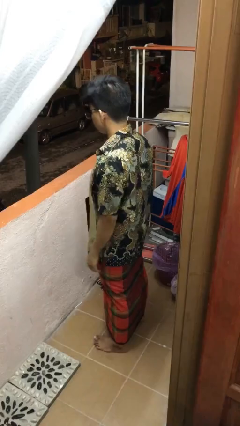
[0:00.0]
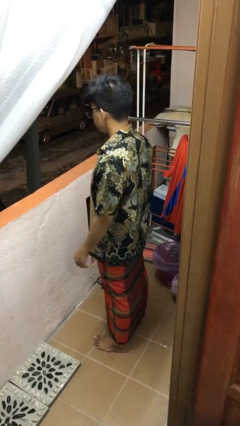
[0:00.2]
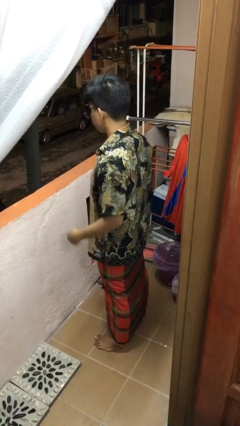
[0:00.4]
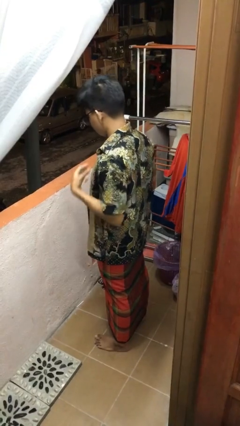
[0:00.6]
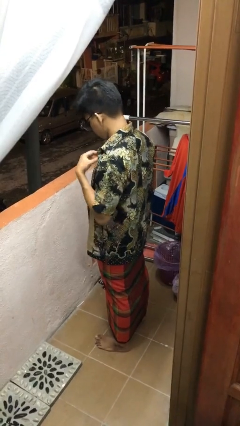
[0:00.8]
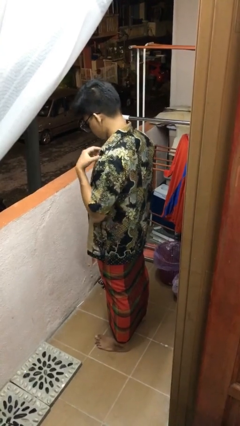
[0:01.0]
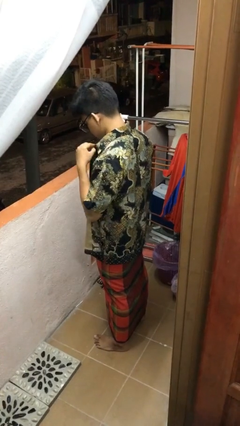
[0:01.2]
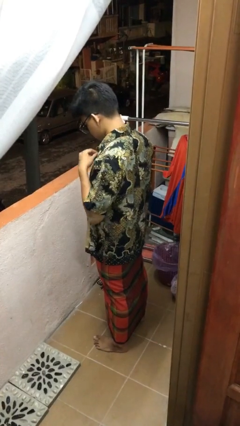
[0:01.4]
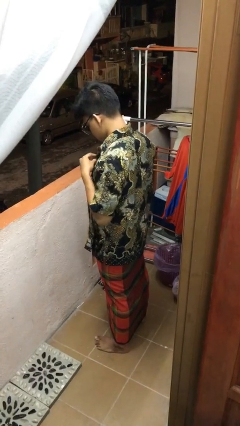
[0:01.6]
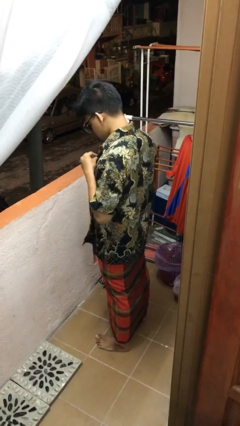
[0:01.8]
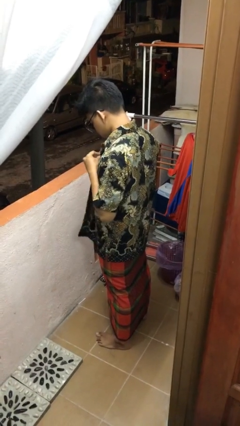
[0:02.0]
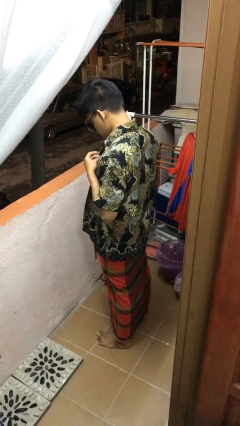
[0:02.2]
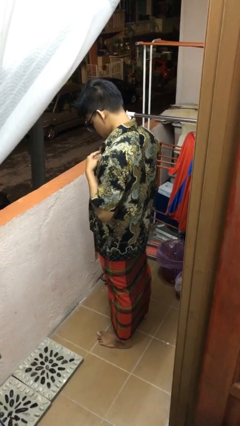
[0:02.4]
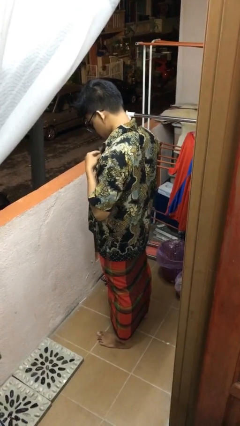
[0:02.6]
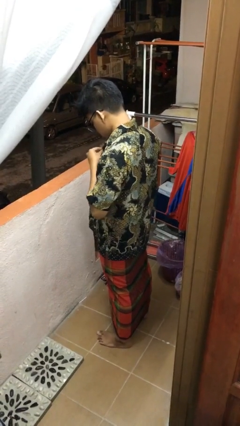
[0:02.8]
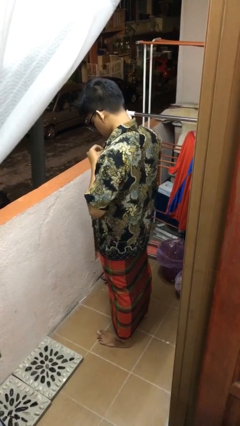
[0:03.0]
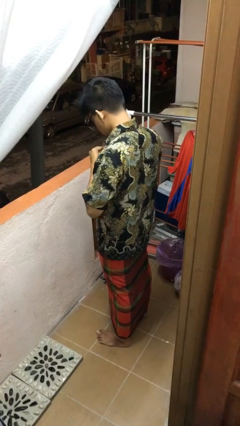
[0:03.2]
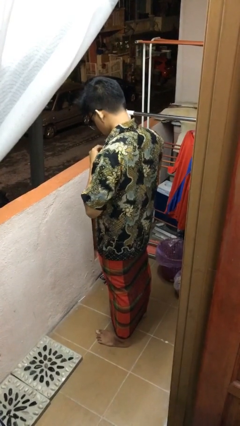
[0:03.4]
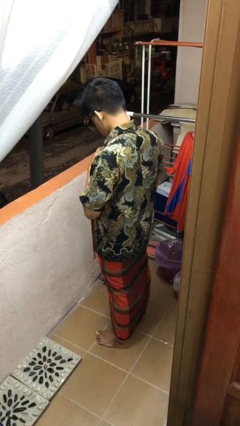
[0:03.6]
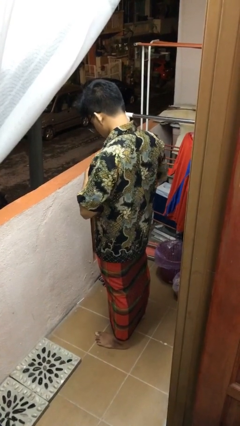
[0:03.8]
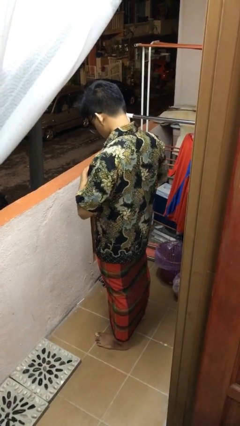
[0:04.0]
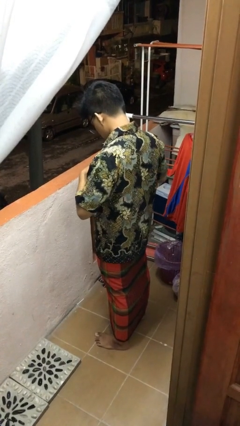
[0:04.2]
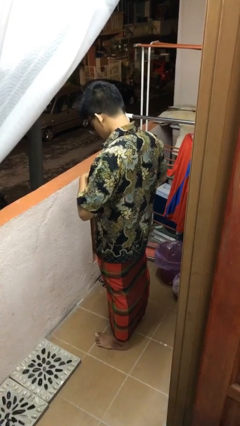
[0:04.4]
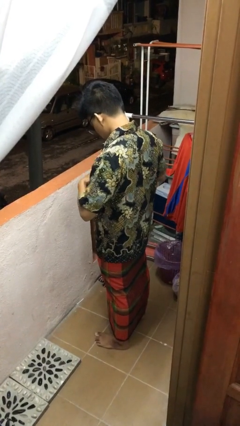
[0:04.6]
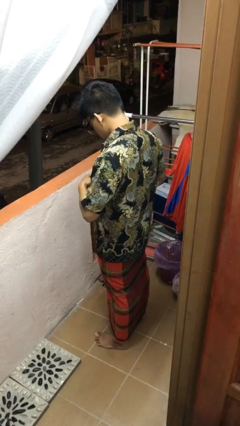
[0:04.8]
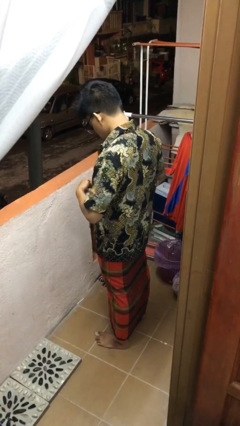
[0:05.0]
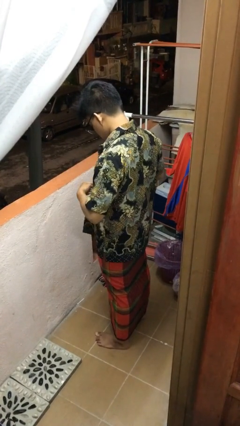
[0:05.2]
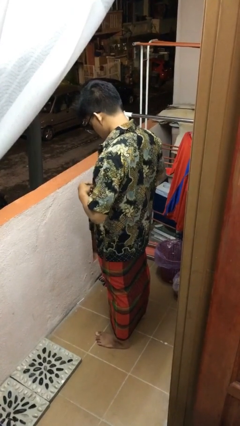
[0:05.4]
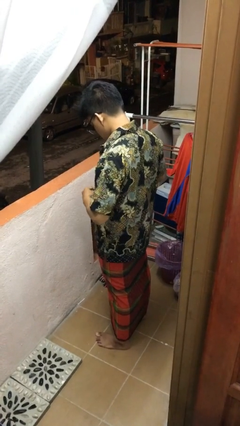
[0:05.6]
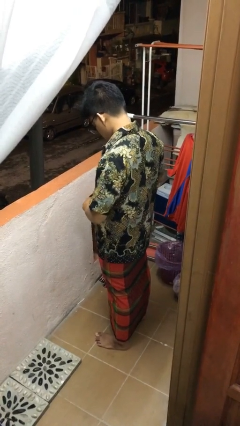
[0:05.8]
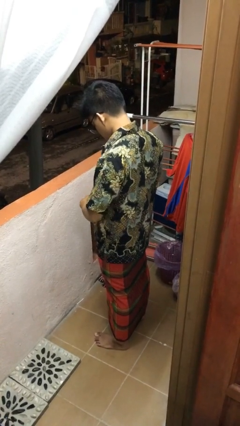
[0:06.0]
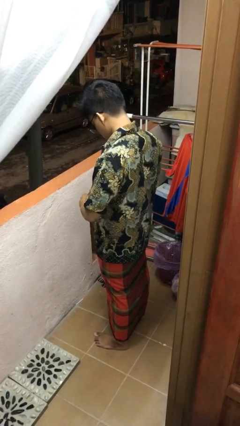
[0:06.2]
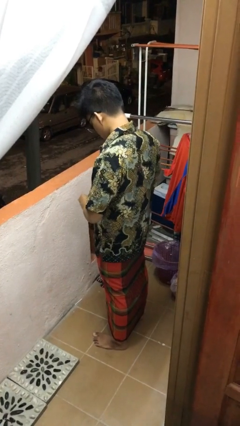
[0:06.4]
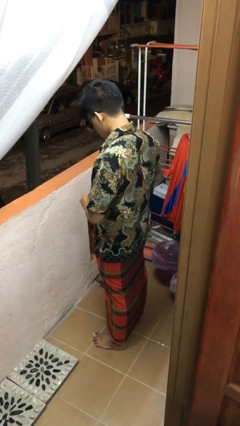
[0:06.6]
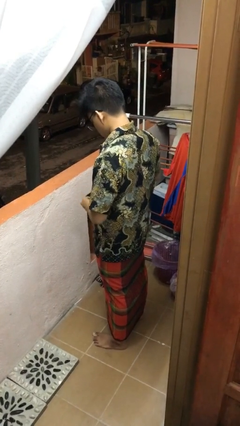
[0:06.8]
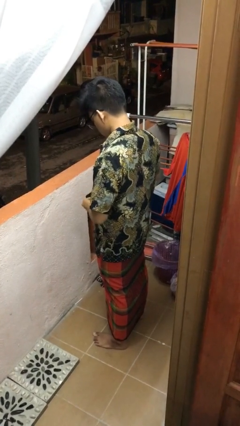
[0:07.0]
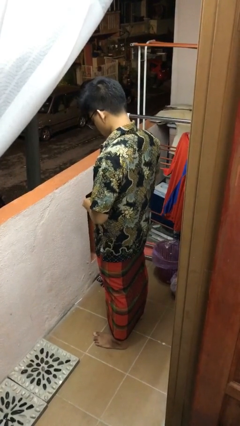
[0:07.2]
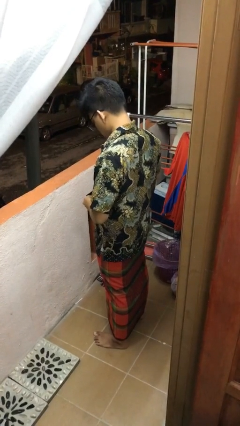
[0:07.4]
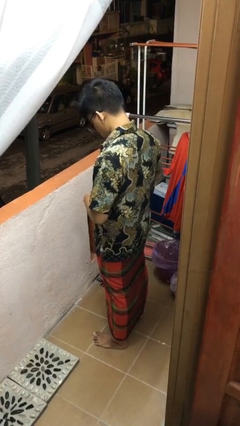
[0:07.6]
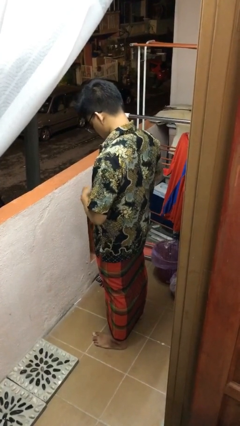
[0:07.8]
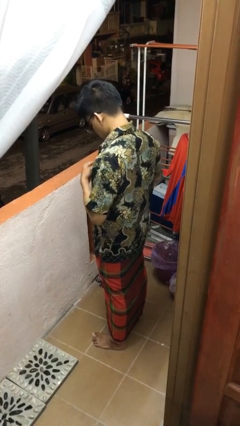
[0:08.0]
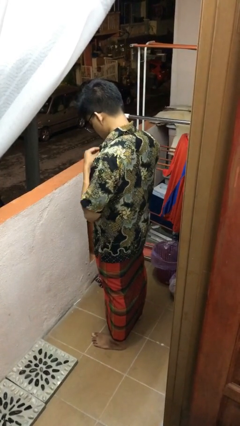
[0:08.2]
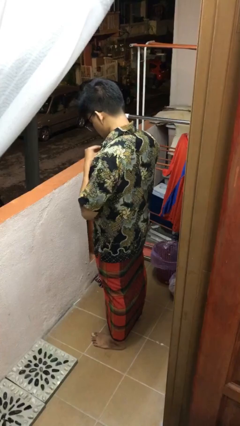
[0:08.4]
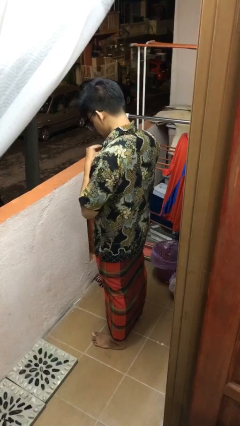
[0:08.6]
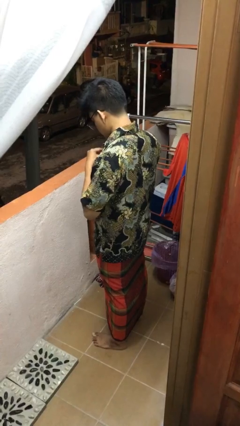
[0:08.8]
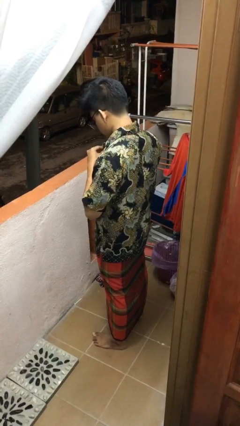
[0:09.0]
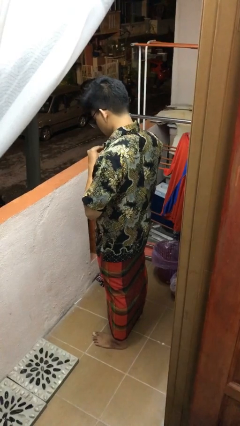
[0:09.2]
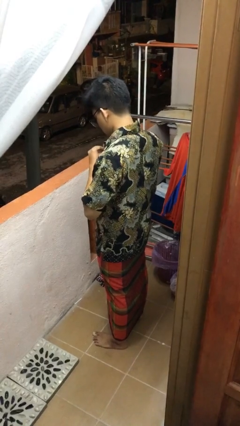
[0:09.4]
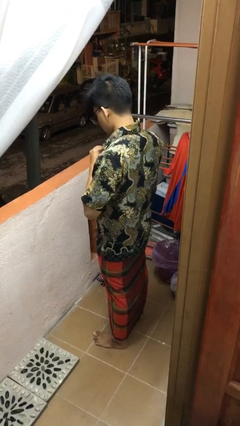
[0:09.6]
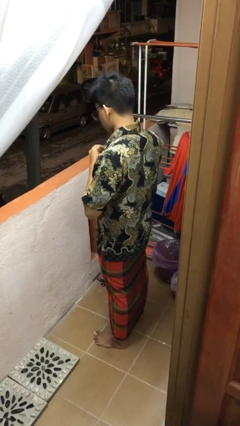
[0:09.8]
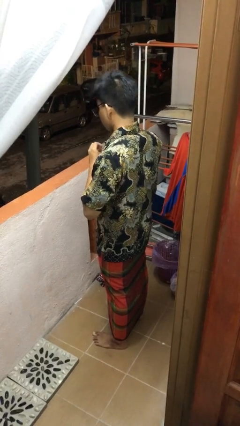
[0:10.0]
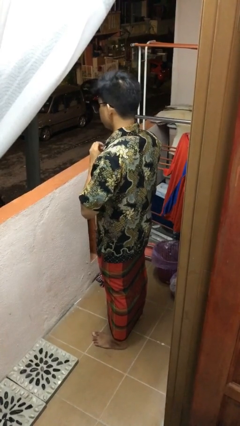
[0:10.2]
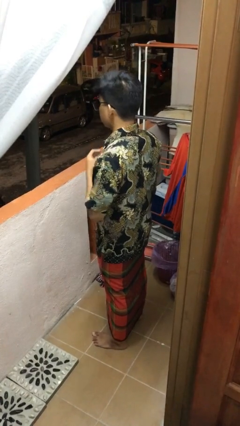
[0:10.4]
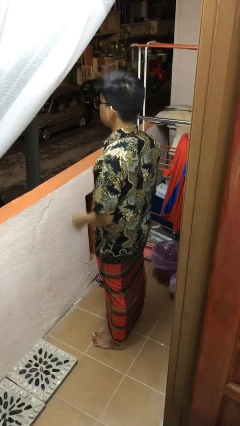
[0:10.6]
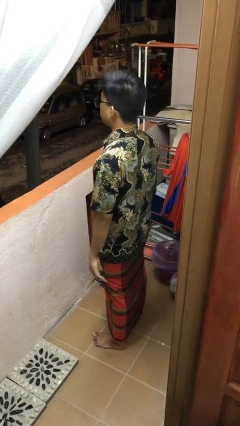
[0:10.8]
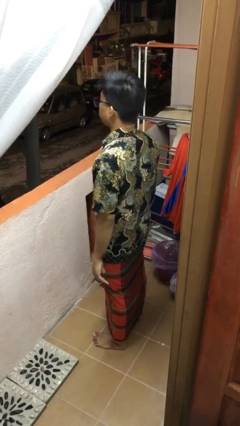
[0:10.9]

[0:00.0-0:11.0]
person buttons shirt

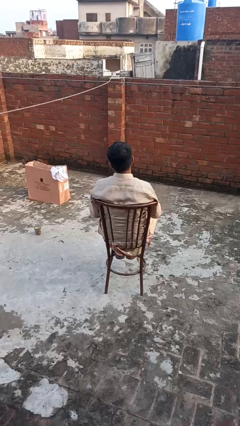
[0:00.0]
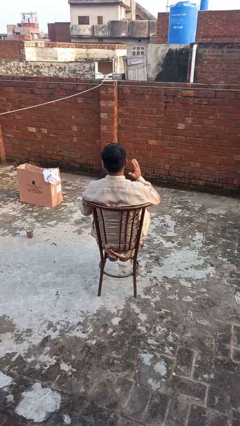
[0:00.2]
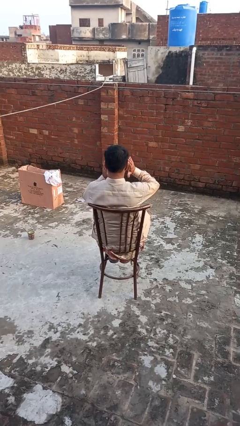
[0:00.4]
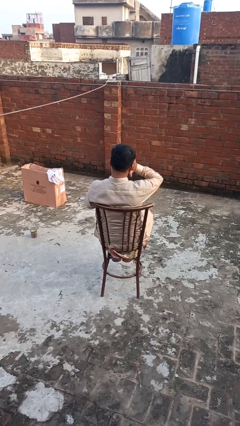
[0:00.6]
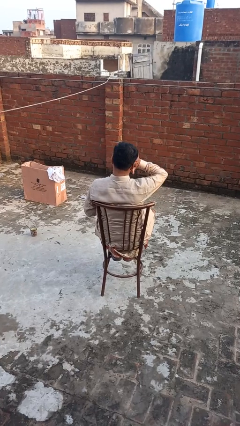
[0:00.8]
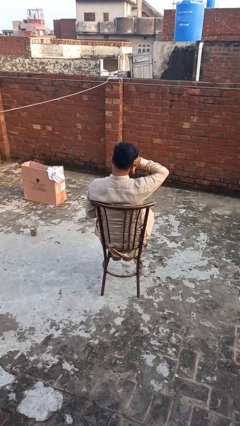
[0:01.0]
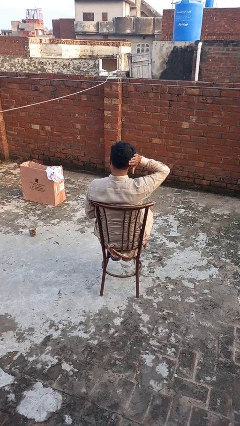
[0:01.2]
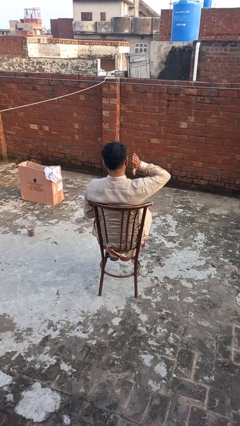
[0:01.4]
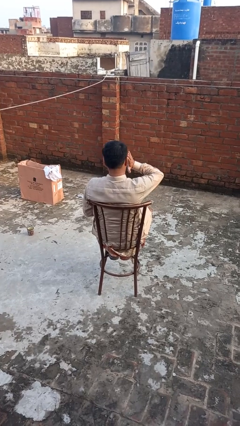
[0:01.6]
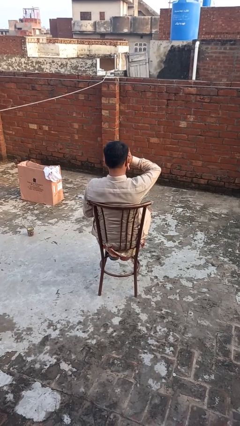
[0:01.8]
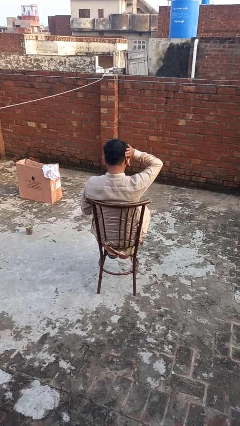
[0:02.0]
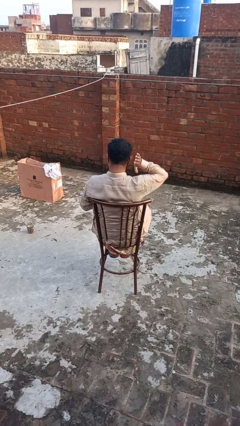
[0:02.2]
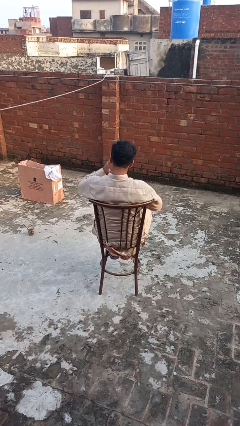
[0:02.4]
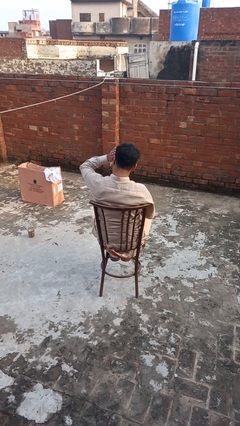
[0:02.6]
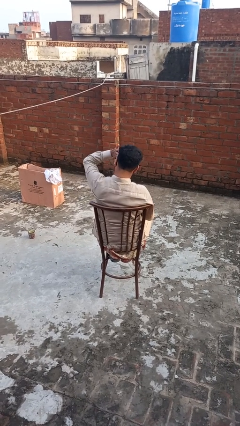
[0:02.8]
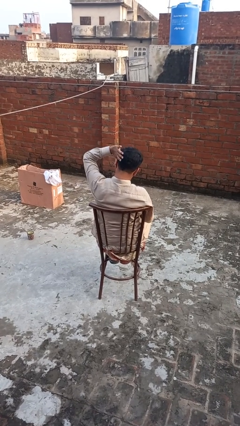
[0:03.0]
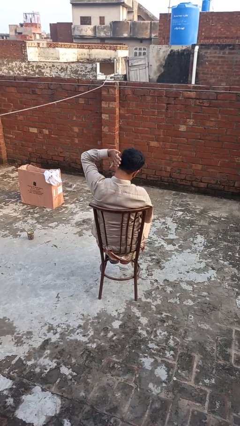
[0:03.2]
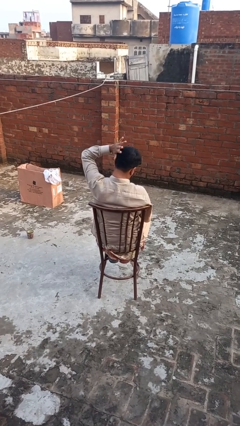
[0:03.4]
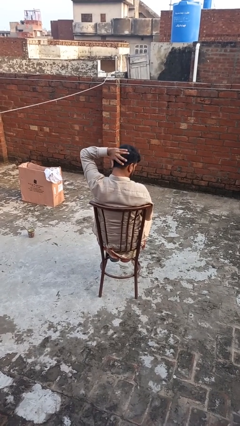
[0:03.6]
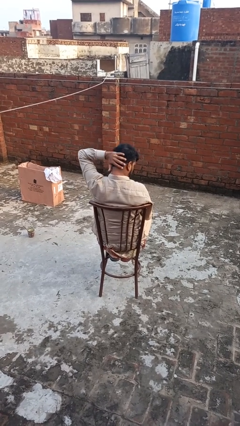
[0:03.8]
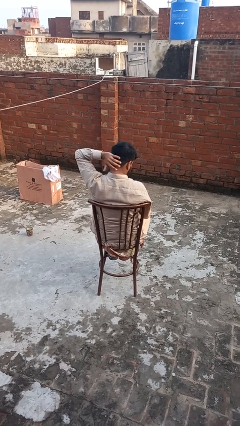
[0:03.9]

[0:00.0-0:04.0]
person strokes hair

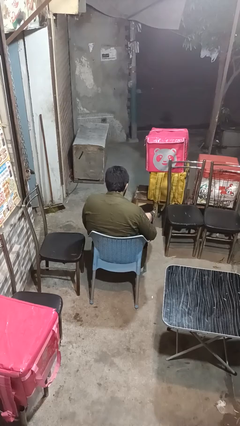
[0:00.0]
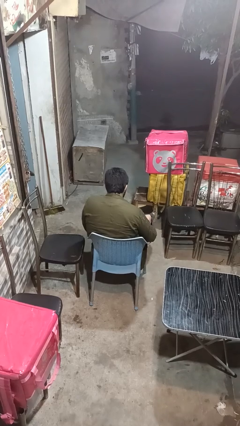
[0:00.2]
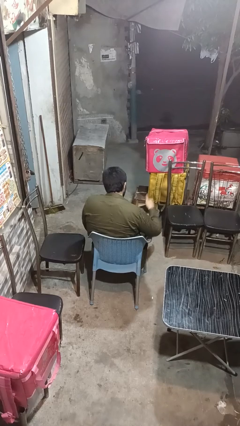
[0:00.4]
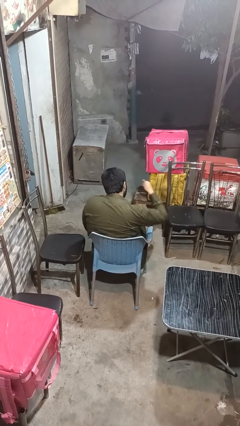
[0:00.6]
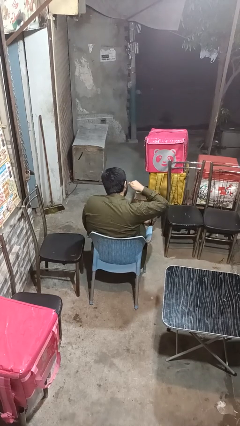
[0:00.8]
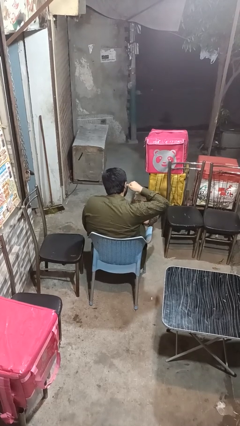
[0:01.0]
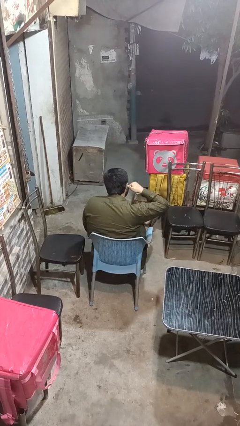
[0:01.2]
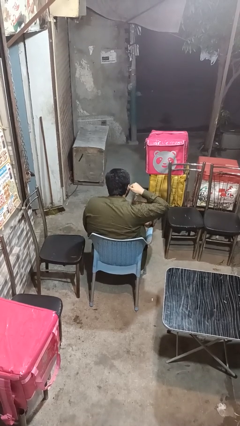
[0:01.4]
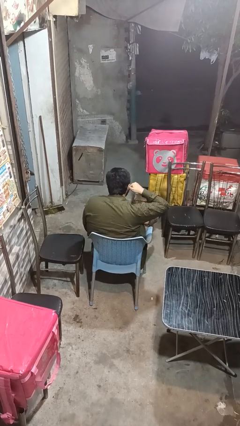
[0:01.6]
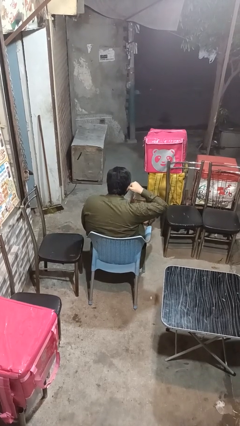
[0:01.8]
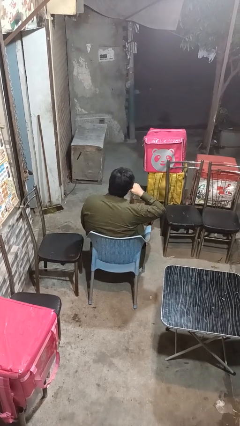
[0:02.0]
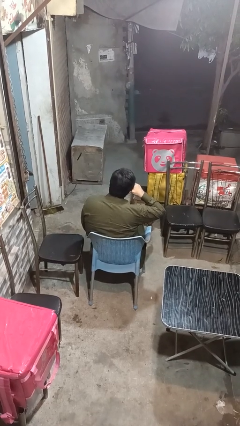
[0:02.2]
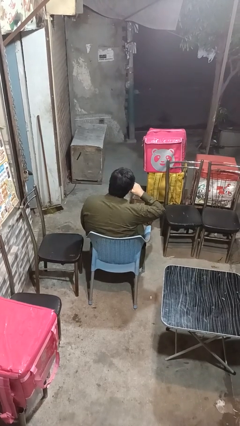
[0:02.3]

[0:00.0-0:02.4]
person gestures call me

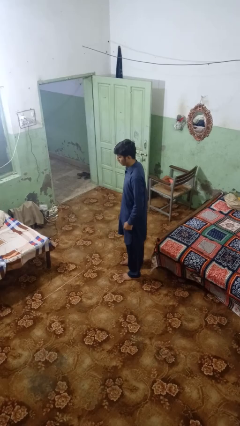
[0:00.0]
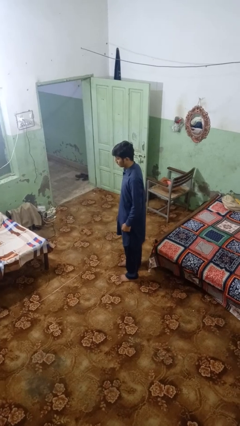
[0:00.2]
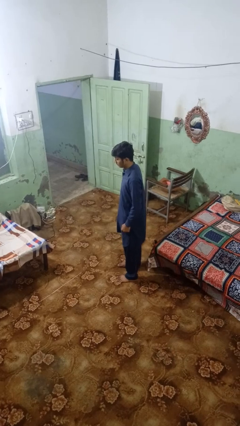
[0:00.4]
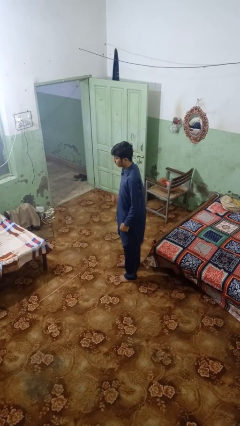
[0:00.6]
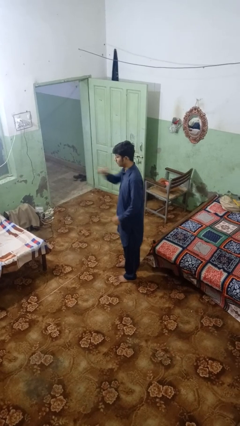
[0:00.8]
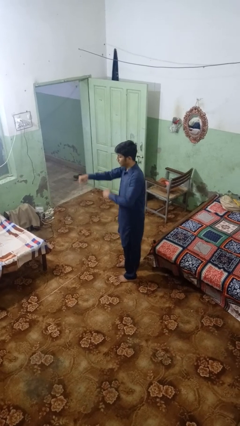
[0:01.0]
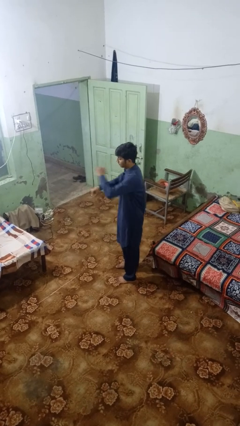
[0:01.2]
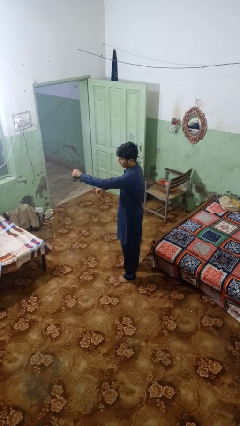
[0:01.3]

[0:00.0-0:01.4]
person punches
